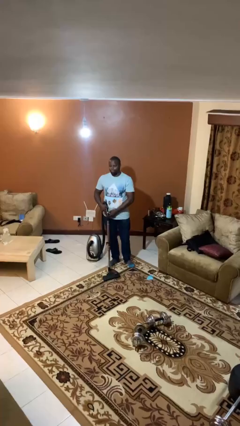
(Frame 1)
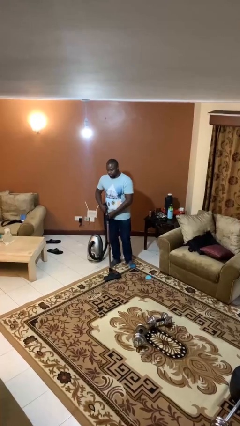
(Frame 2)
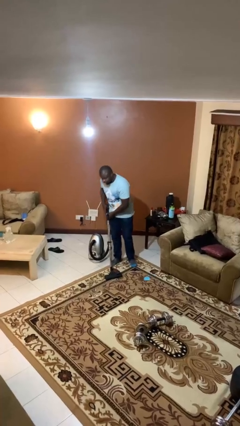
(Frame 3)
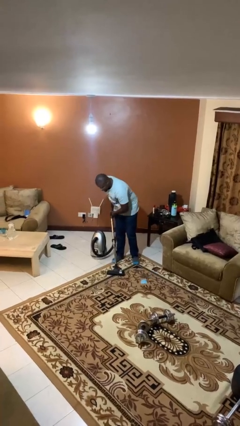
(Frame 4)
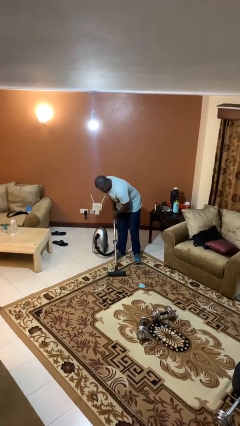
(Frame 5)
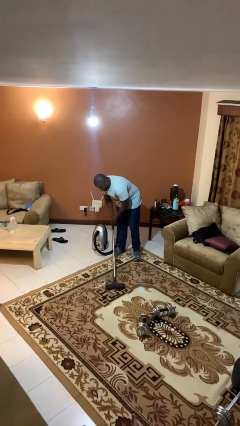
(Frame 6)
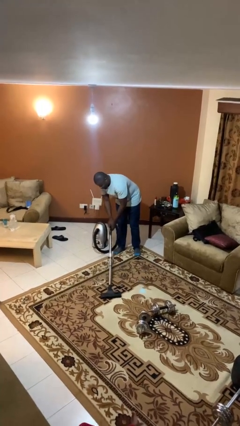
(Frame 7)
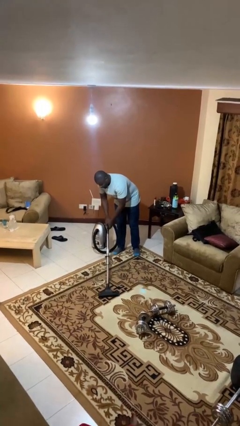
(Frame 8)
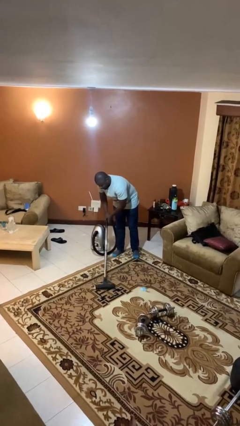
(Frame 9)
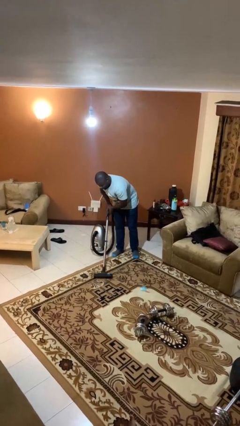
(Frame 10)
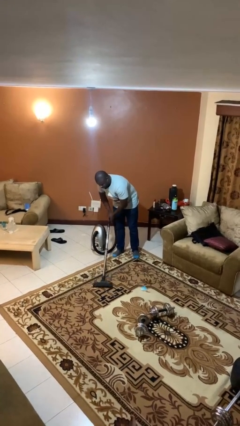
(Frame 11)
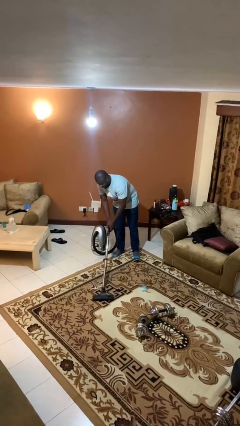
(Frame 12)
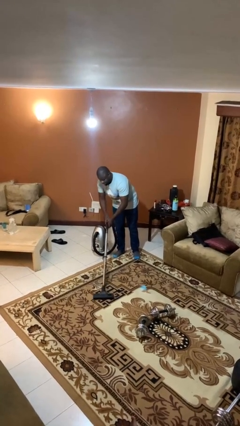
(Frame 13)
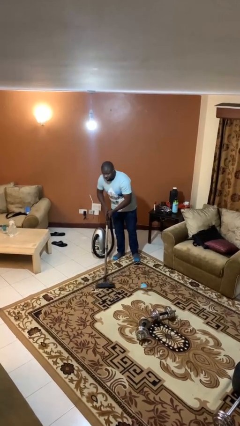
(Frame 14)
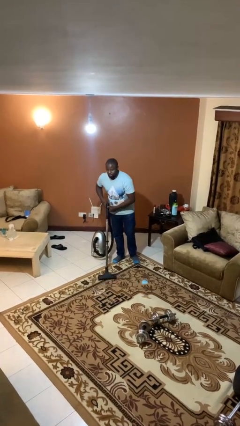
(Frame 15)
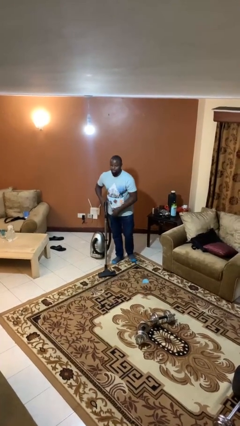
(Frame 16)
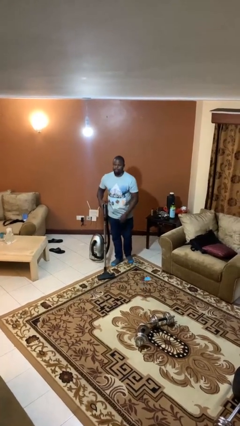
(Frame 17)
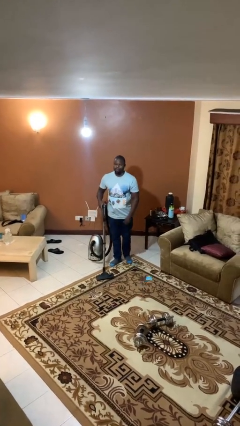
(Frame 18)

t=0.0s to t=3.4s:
person vacuums carpet

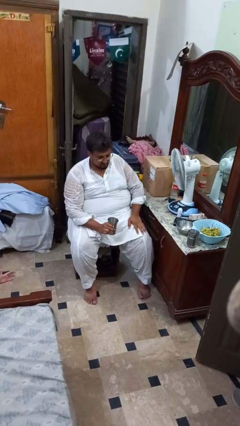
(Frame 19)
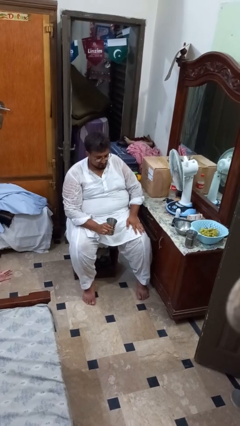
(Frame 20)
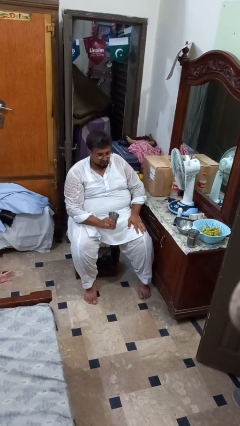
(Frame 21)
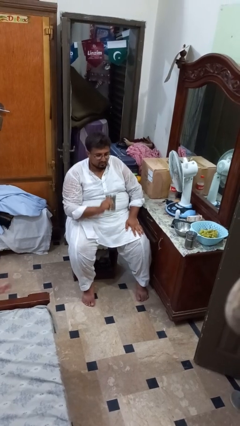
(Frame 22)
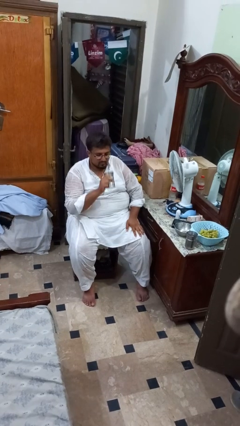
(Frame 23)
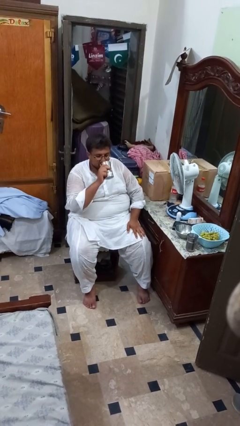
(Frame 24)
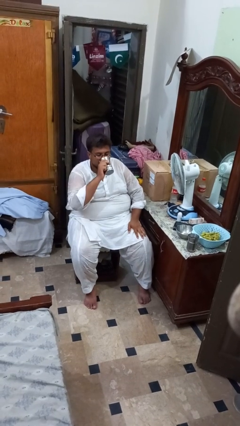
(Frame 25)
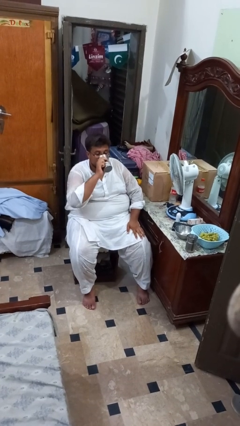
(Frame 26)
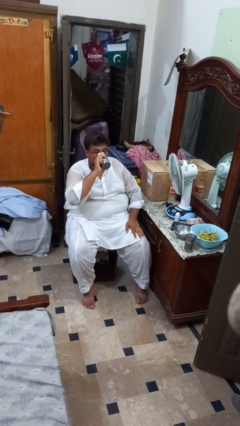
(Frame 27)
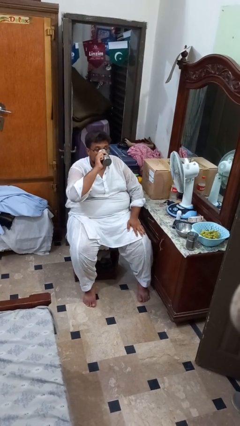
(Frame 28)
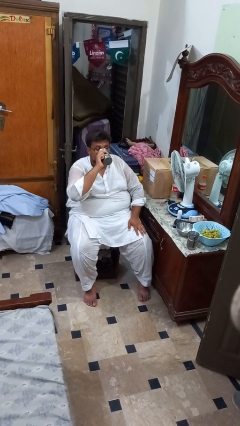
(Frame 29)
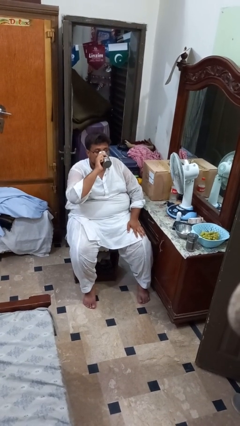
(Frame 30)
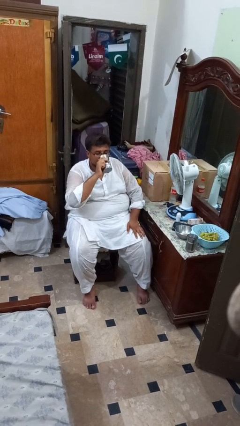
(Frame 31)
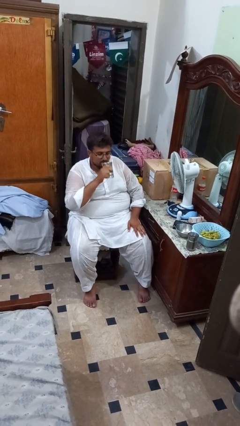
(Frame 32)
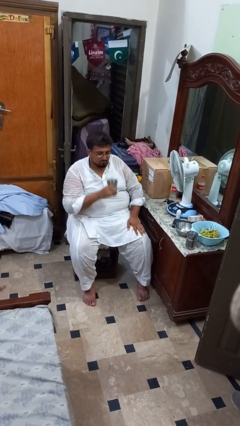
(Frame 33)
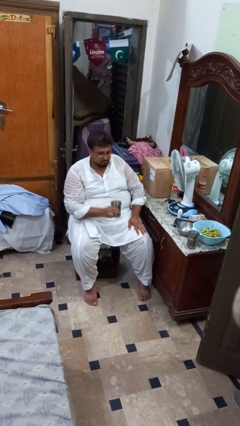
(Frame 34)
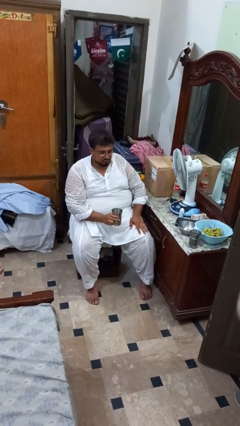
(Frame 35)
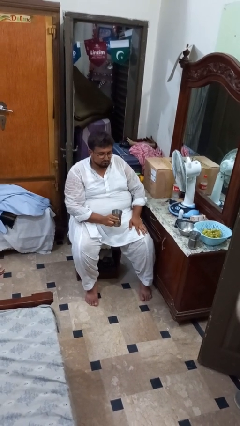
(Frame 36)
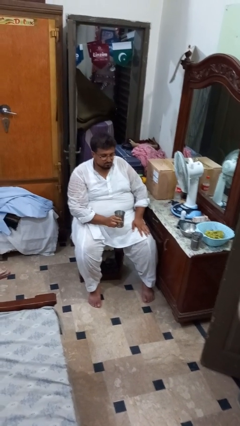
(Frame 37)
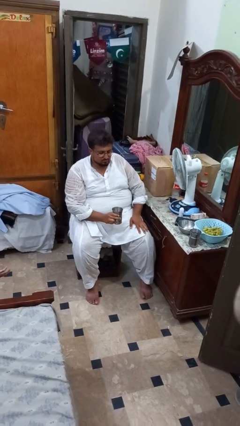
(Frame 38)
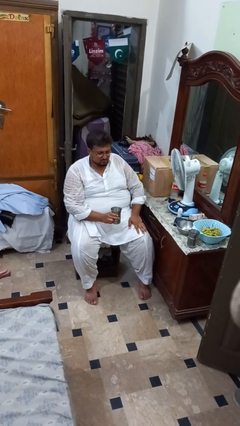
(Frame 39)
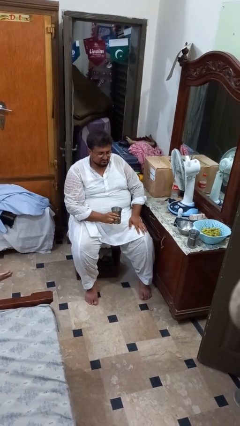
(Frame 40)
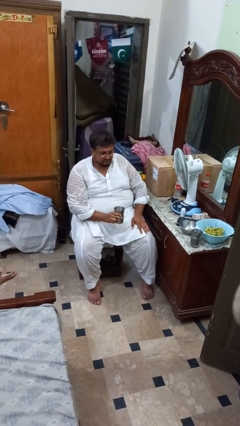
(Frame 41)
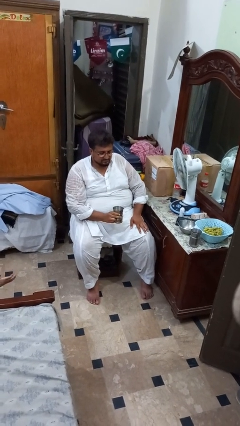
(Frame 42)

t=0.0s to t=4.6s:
person drinks from mug

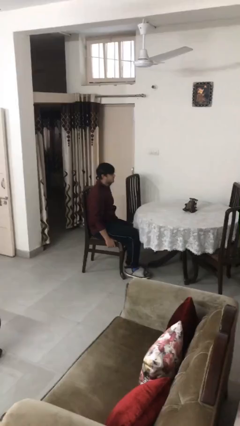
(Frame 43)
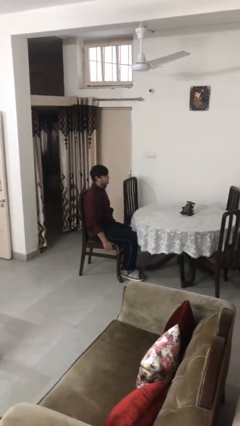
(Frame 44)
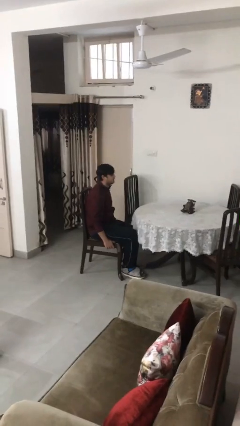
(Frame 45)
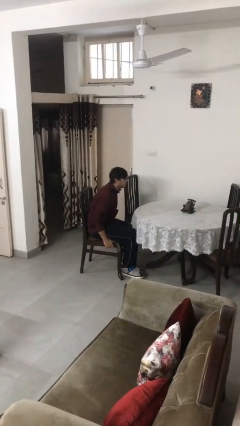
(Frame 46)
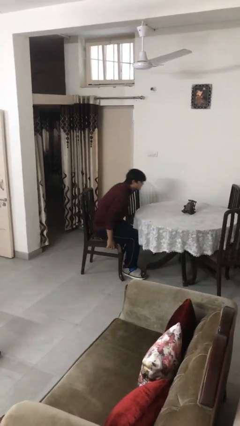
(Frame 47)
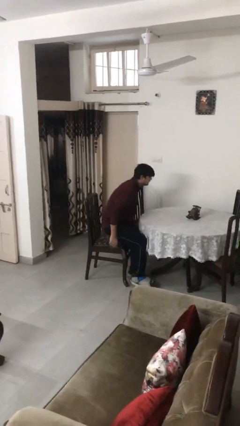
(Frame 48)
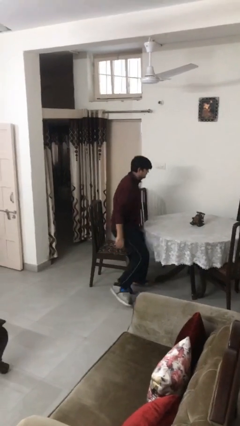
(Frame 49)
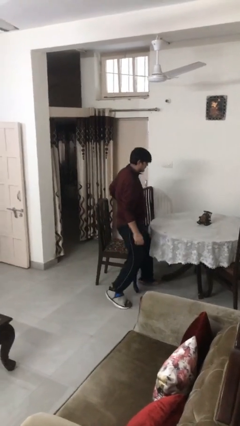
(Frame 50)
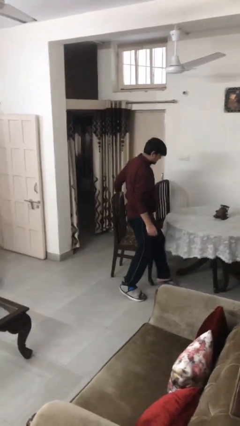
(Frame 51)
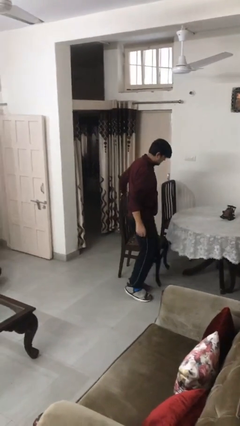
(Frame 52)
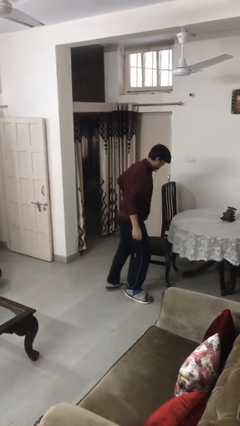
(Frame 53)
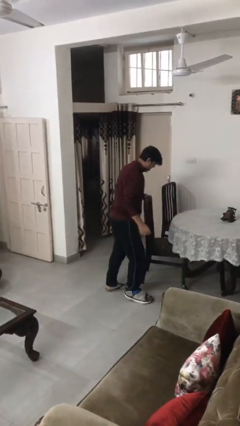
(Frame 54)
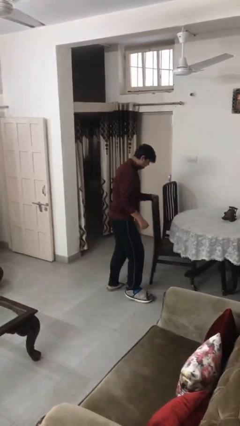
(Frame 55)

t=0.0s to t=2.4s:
person stands up

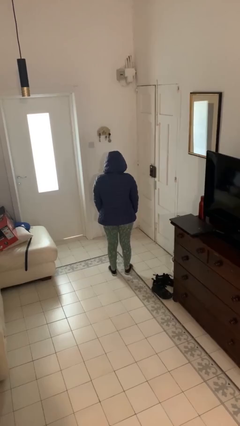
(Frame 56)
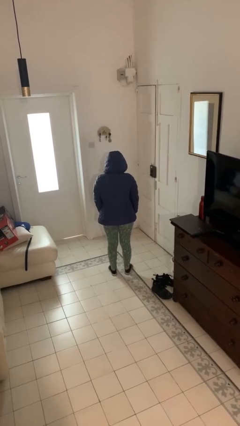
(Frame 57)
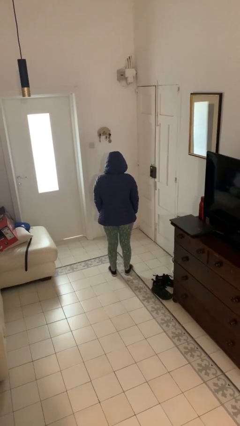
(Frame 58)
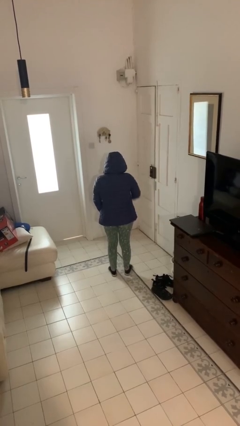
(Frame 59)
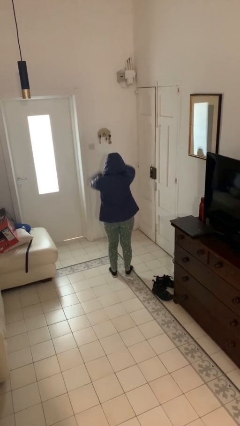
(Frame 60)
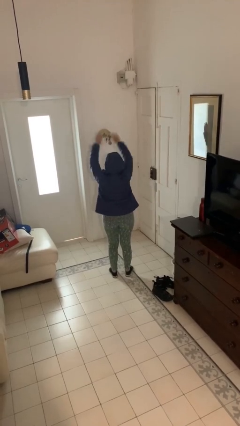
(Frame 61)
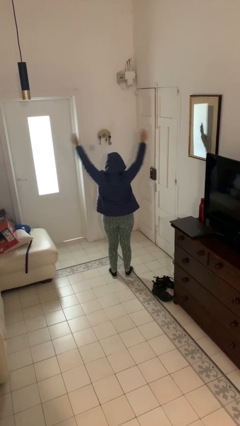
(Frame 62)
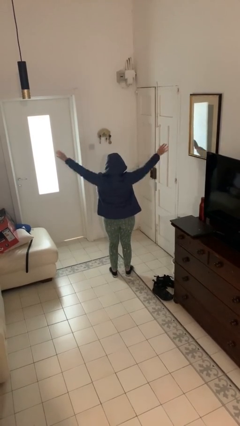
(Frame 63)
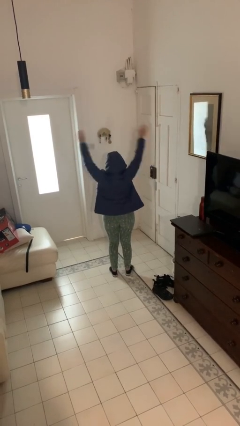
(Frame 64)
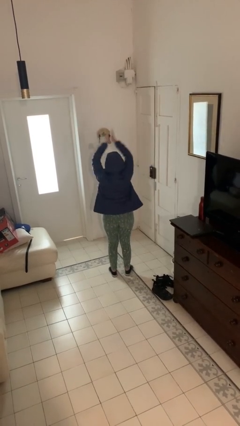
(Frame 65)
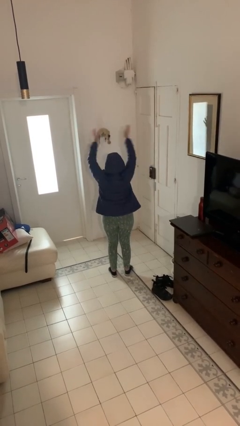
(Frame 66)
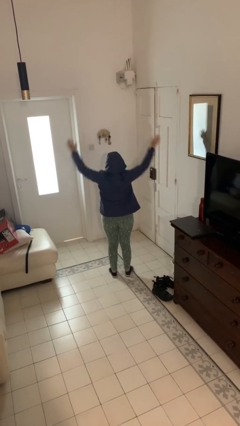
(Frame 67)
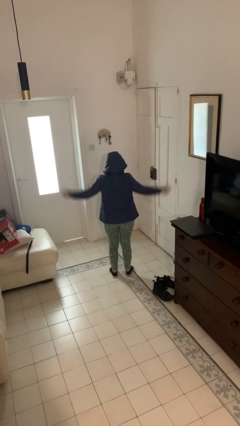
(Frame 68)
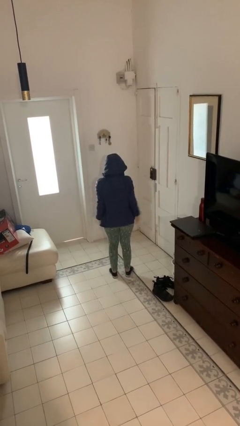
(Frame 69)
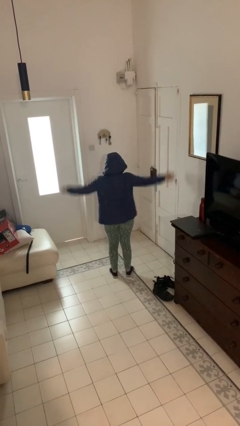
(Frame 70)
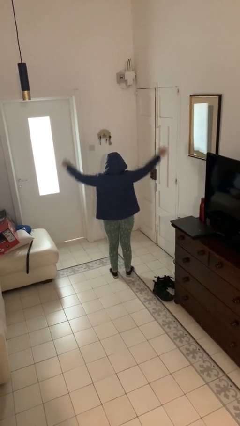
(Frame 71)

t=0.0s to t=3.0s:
person dances in place

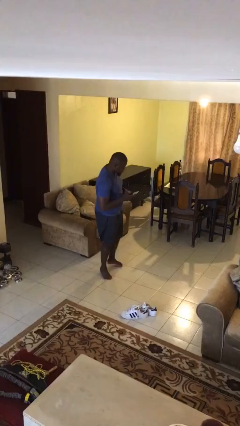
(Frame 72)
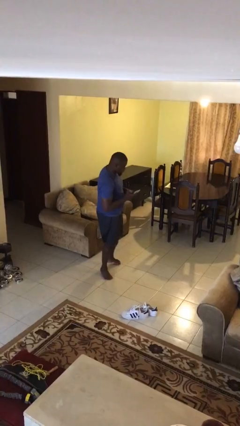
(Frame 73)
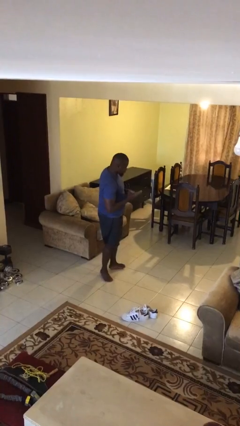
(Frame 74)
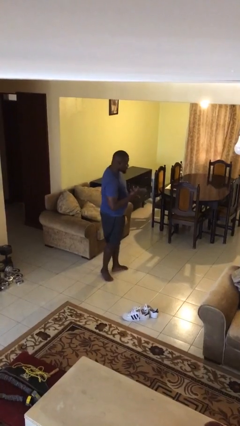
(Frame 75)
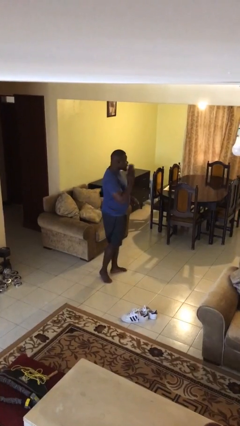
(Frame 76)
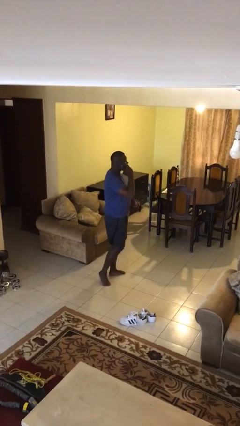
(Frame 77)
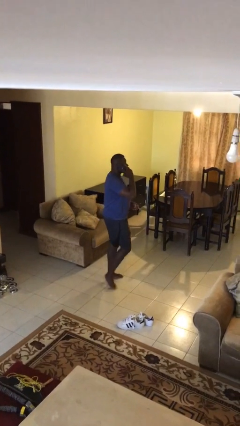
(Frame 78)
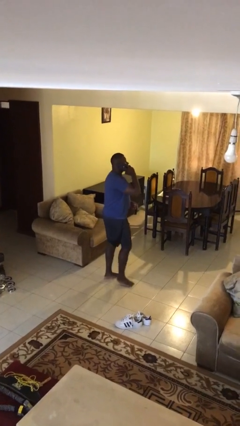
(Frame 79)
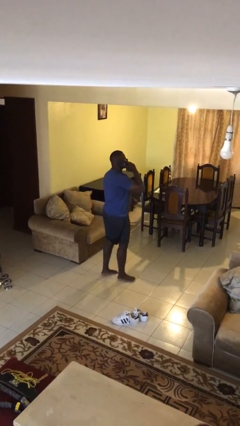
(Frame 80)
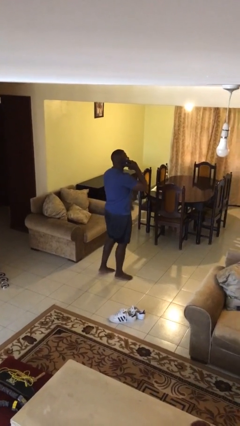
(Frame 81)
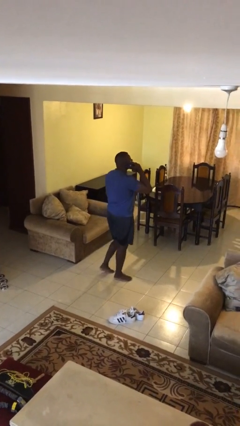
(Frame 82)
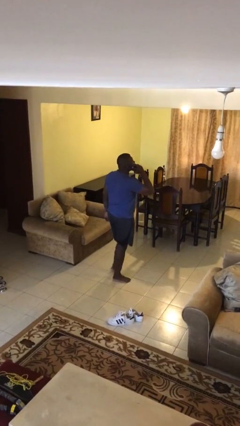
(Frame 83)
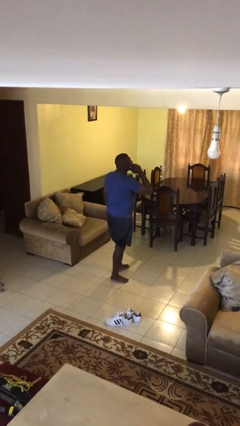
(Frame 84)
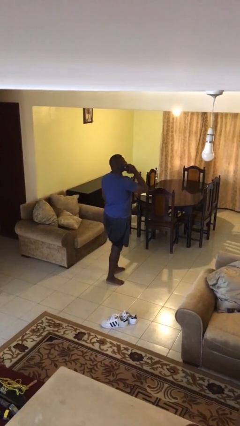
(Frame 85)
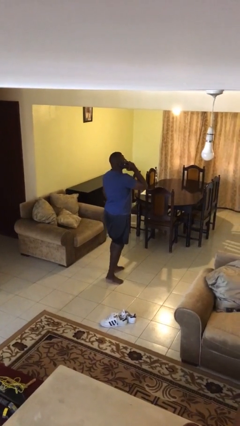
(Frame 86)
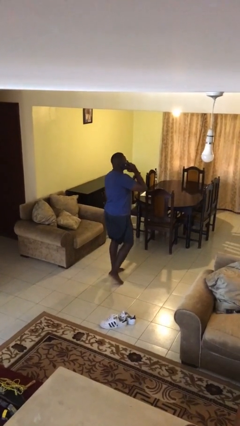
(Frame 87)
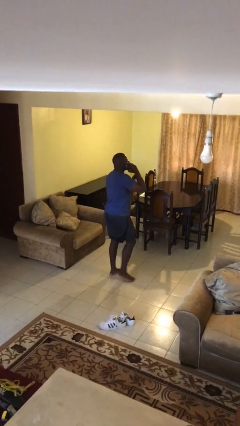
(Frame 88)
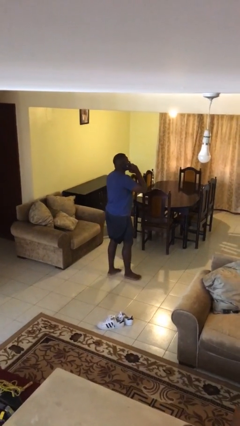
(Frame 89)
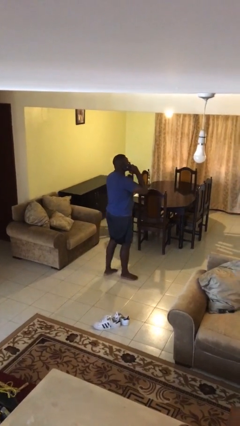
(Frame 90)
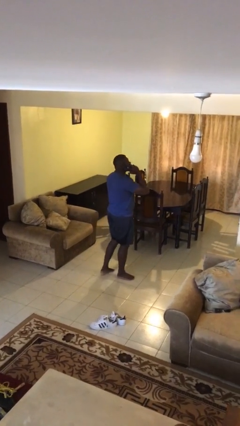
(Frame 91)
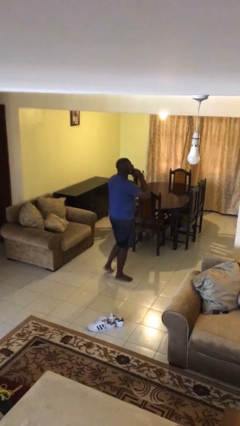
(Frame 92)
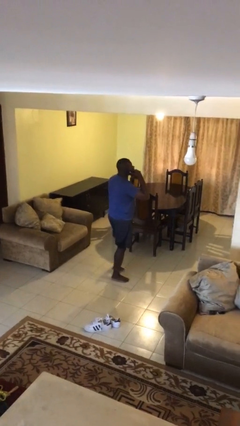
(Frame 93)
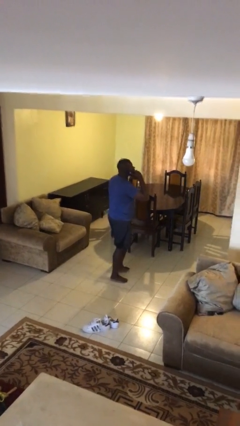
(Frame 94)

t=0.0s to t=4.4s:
person talks on phone
